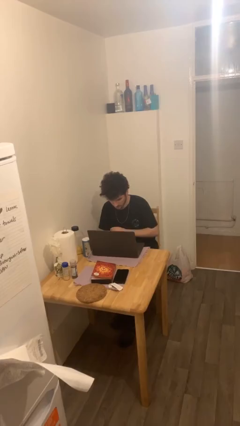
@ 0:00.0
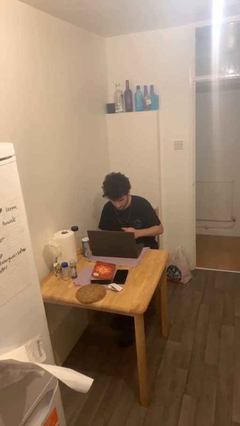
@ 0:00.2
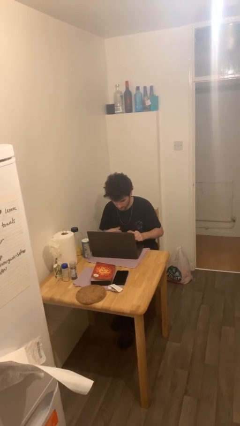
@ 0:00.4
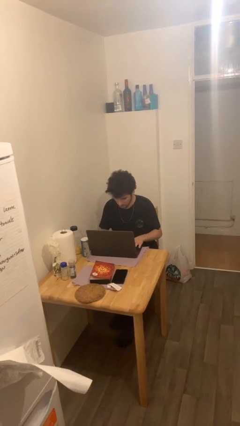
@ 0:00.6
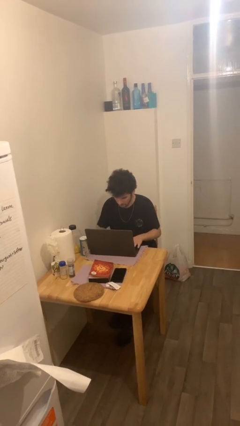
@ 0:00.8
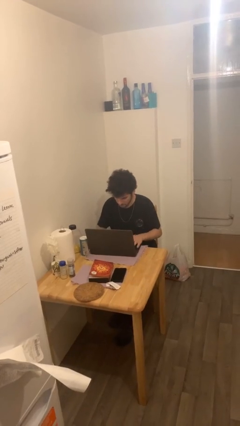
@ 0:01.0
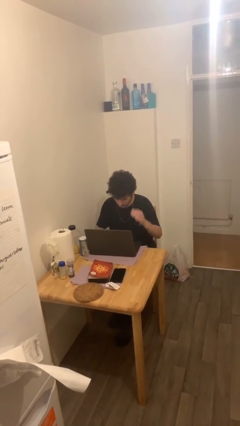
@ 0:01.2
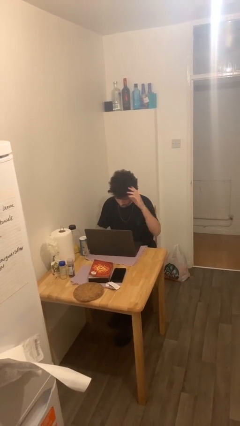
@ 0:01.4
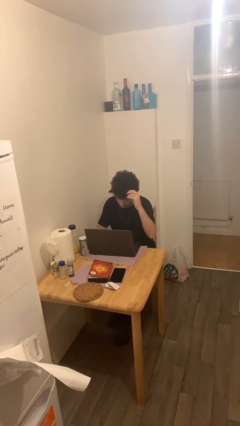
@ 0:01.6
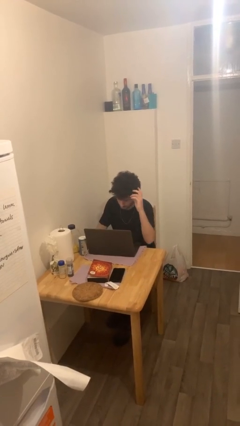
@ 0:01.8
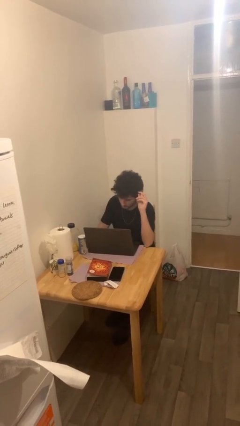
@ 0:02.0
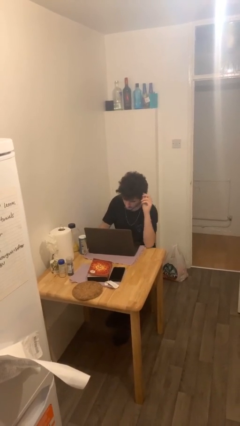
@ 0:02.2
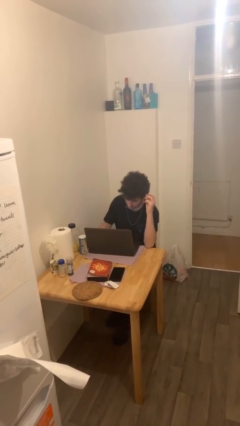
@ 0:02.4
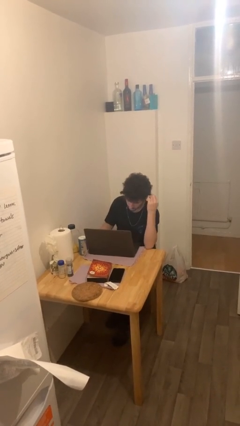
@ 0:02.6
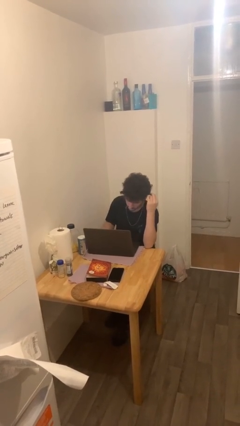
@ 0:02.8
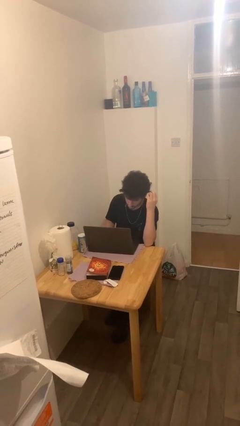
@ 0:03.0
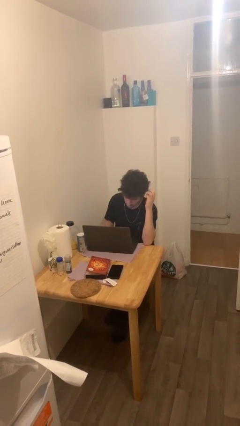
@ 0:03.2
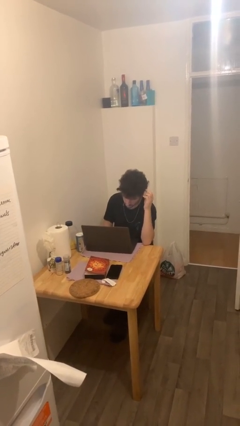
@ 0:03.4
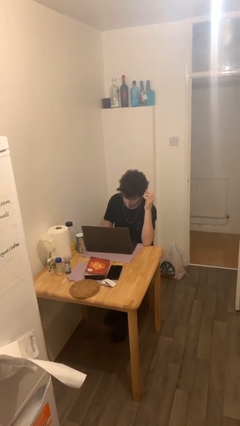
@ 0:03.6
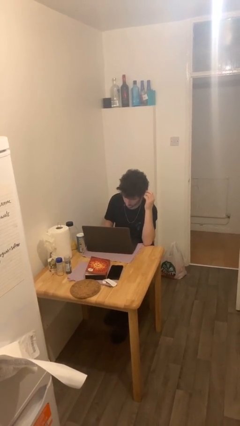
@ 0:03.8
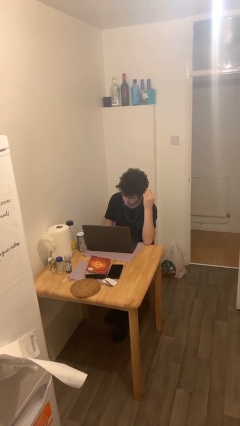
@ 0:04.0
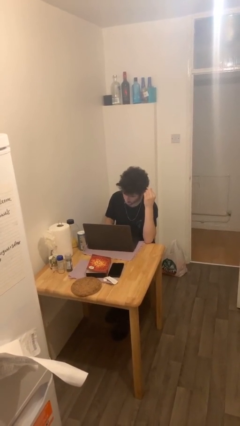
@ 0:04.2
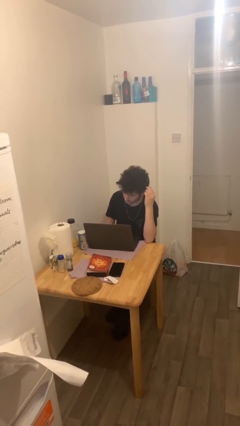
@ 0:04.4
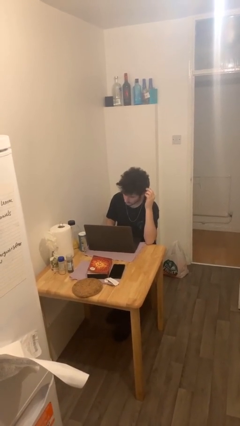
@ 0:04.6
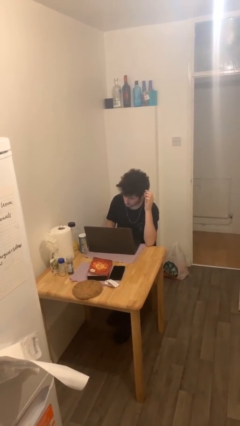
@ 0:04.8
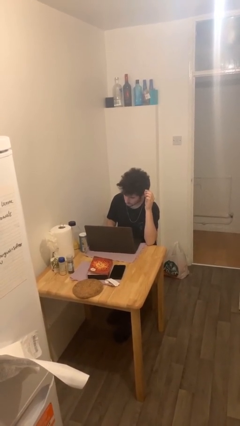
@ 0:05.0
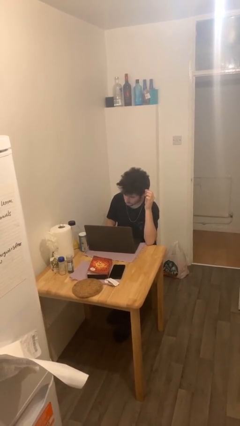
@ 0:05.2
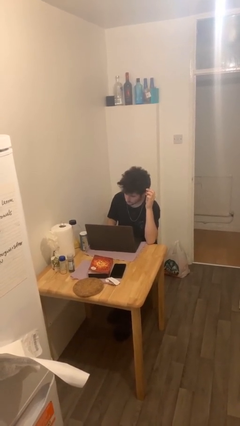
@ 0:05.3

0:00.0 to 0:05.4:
person interacts with laptop

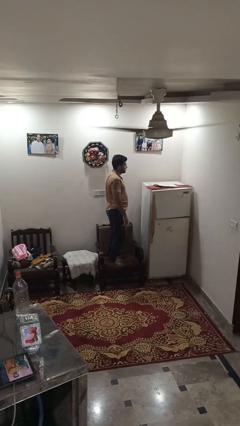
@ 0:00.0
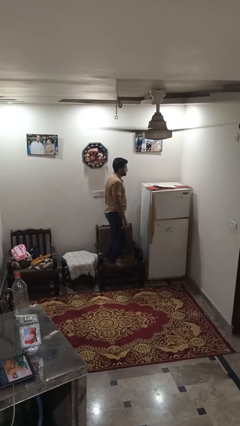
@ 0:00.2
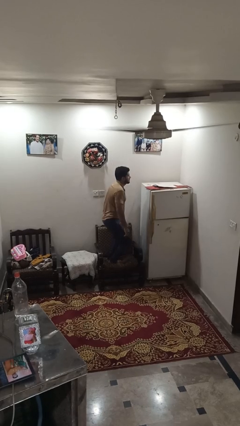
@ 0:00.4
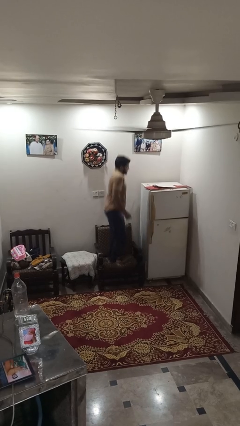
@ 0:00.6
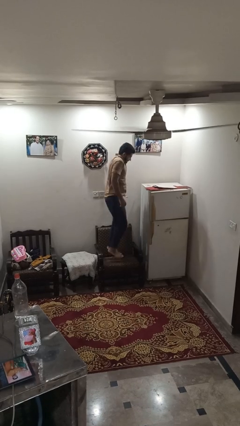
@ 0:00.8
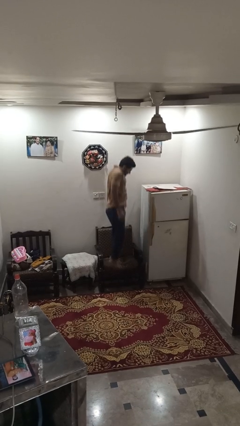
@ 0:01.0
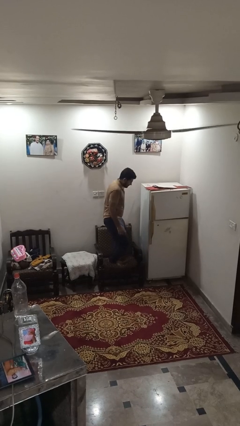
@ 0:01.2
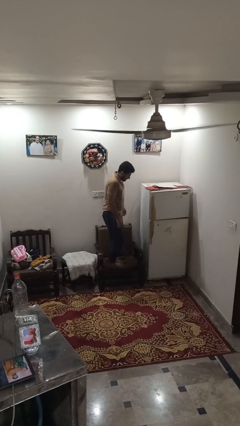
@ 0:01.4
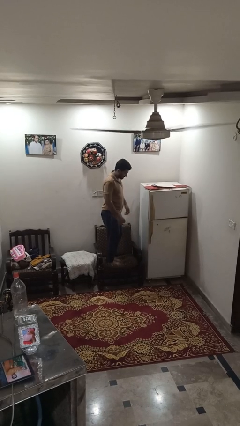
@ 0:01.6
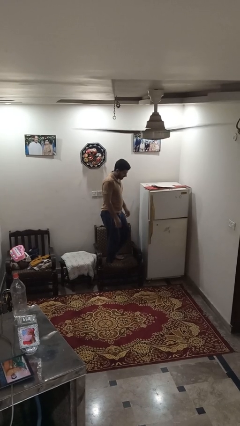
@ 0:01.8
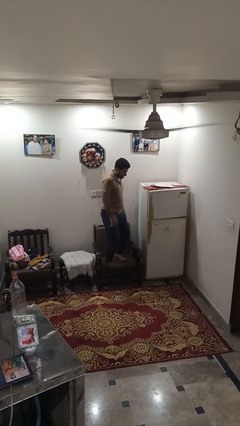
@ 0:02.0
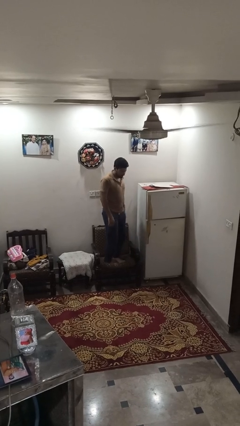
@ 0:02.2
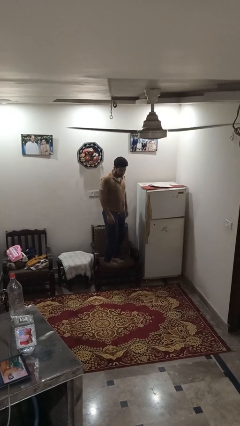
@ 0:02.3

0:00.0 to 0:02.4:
person jumps on couch

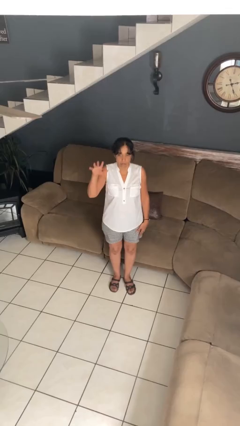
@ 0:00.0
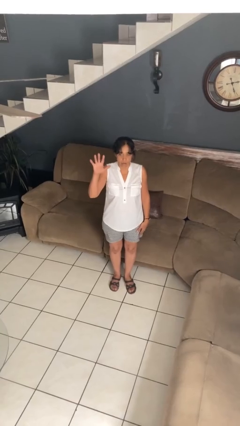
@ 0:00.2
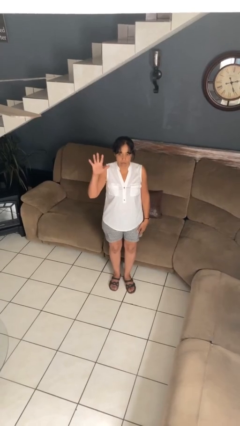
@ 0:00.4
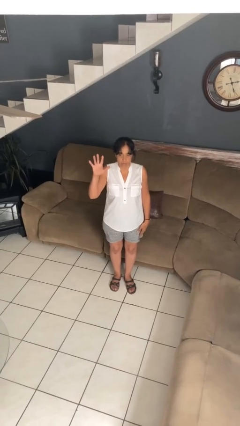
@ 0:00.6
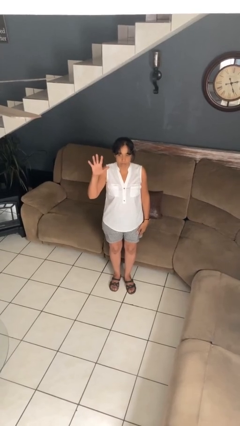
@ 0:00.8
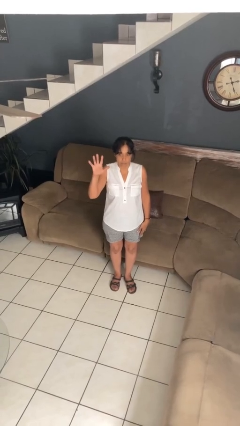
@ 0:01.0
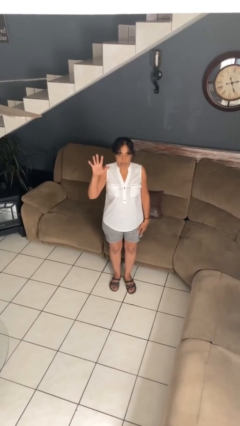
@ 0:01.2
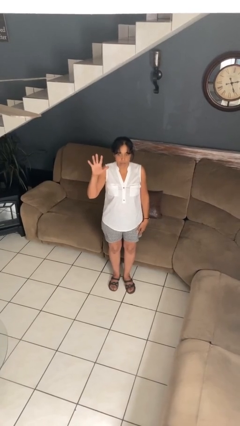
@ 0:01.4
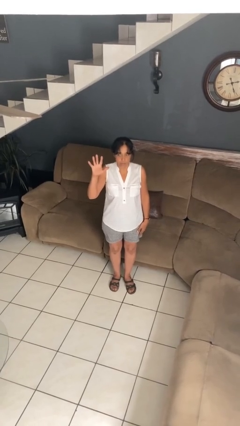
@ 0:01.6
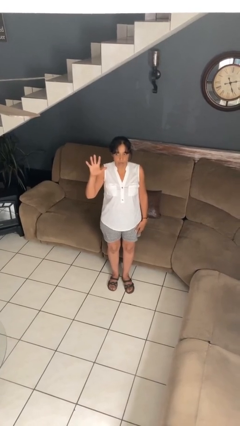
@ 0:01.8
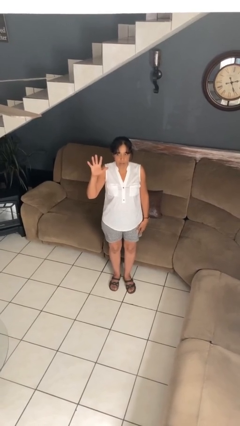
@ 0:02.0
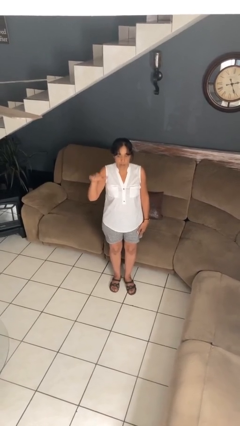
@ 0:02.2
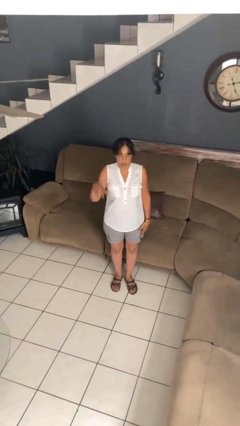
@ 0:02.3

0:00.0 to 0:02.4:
person gestures number five

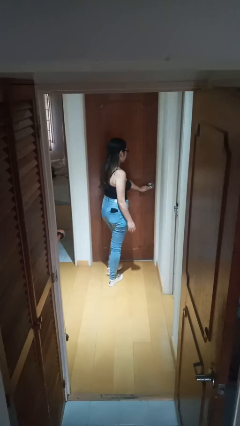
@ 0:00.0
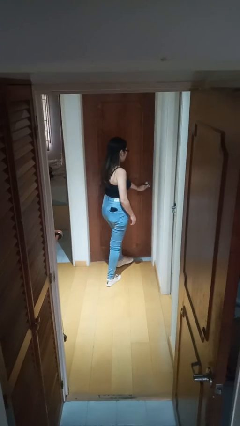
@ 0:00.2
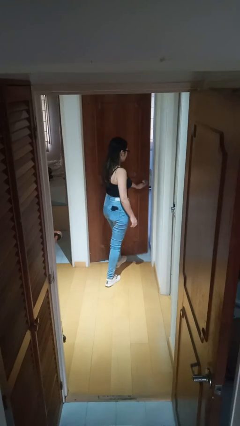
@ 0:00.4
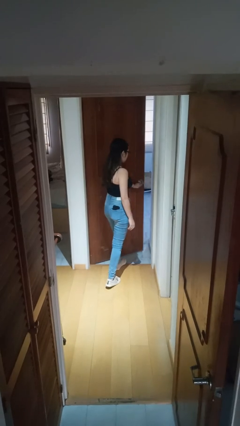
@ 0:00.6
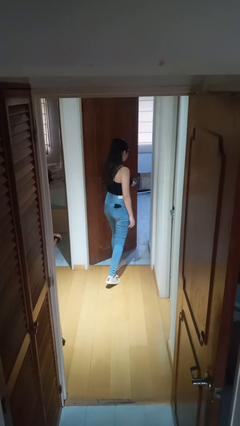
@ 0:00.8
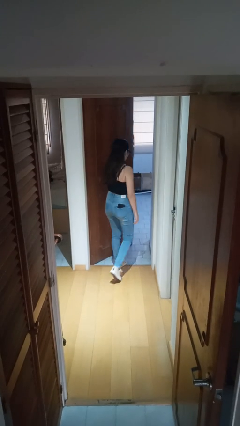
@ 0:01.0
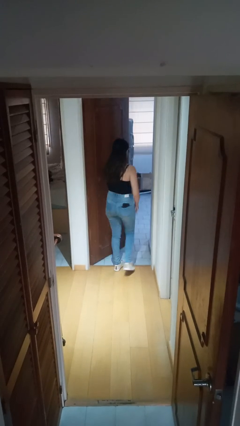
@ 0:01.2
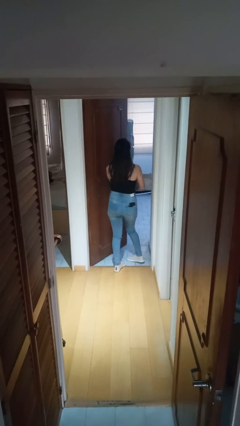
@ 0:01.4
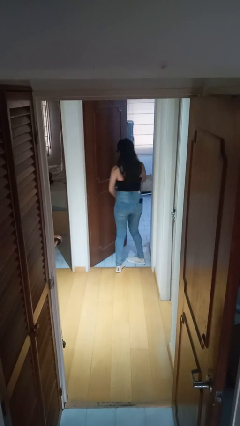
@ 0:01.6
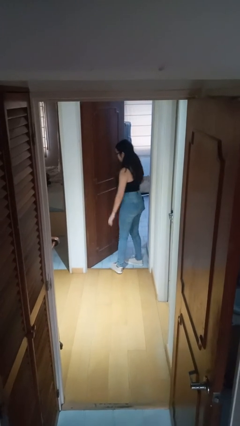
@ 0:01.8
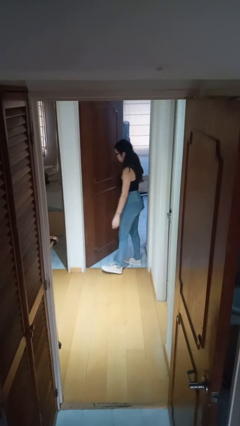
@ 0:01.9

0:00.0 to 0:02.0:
person opens facility door

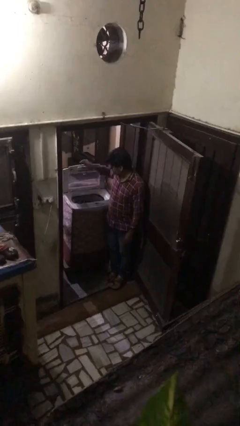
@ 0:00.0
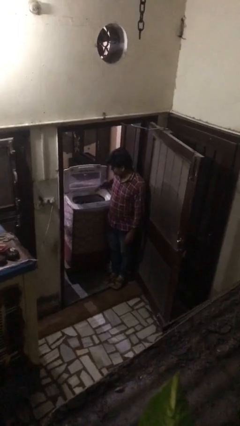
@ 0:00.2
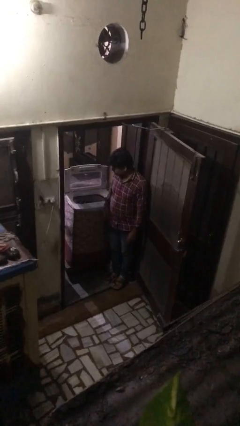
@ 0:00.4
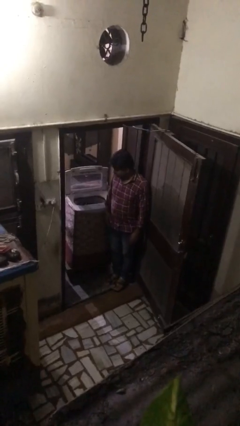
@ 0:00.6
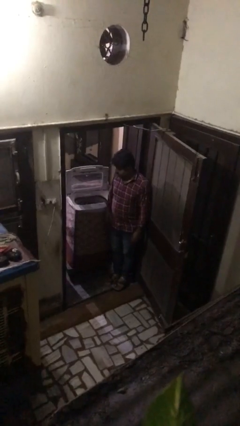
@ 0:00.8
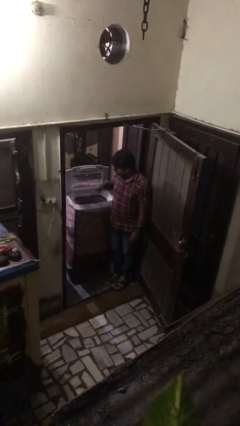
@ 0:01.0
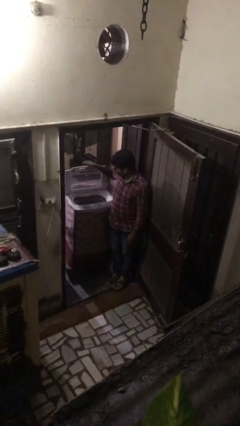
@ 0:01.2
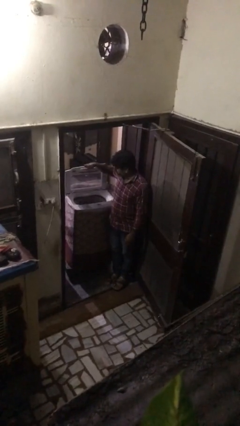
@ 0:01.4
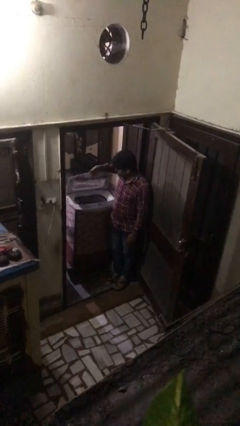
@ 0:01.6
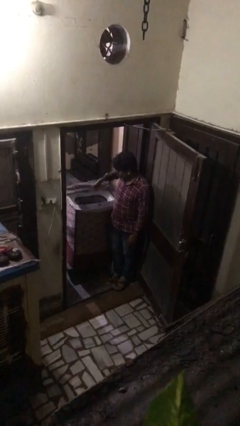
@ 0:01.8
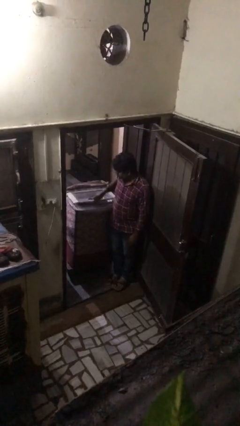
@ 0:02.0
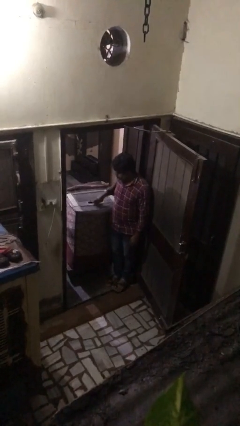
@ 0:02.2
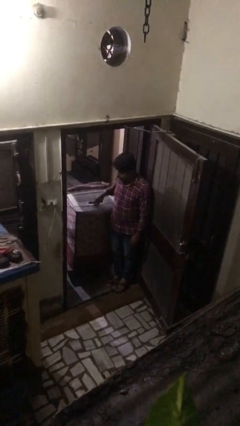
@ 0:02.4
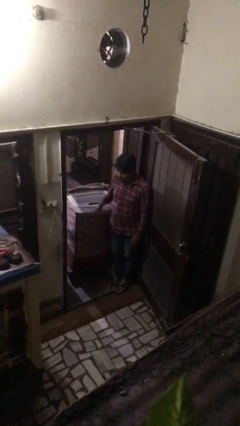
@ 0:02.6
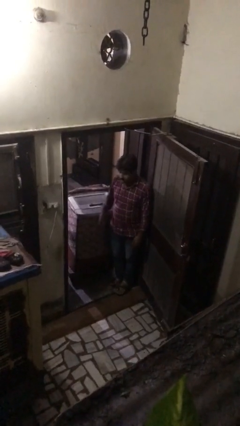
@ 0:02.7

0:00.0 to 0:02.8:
person closes clothes washer

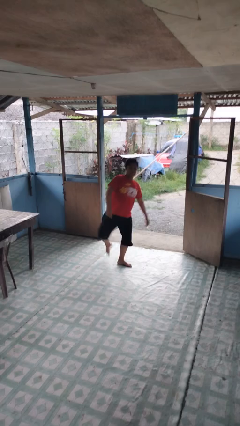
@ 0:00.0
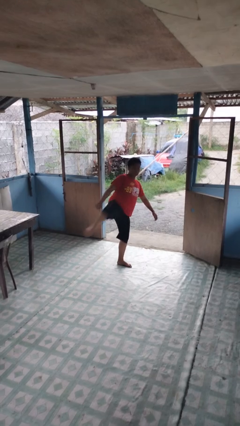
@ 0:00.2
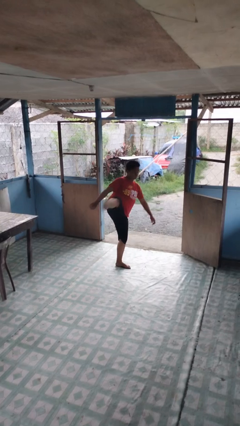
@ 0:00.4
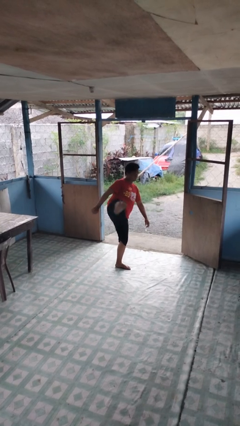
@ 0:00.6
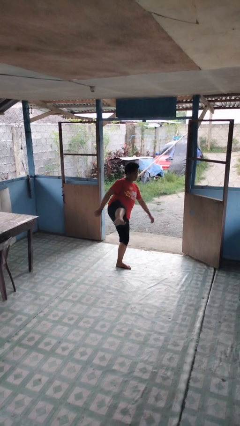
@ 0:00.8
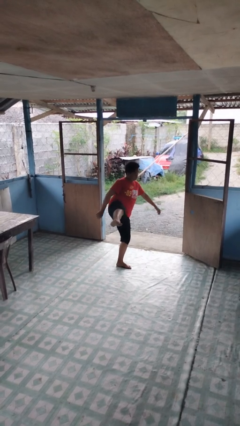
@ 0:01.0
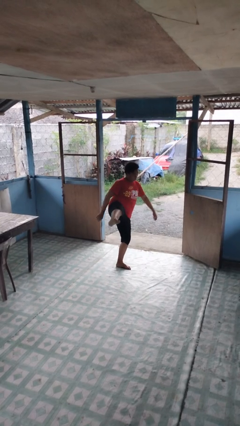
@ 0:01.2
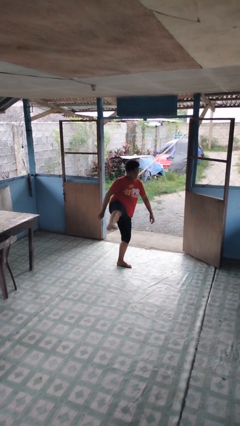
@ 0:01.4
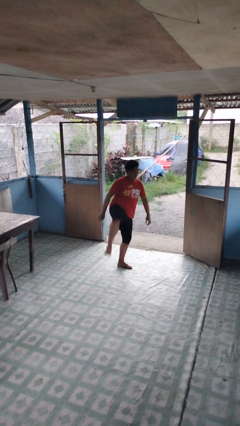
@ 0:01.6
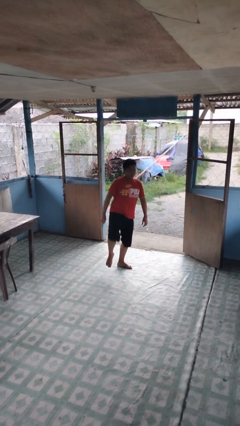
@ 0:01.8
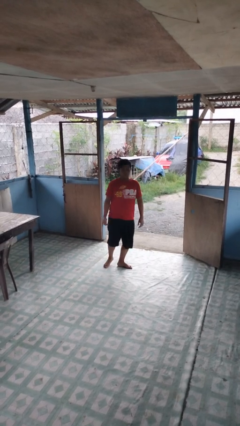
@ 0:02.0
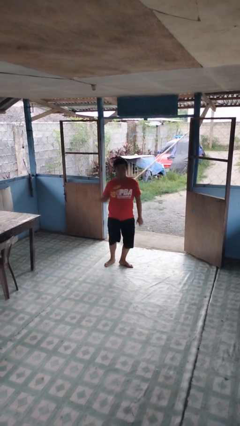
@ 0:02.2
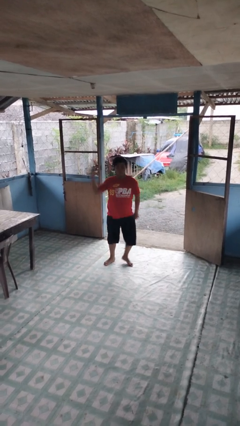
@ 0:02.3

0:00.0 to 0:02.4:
person karate kicks
